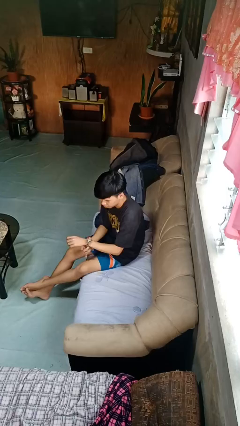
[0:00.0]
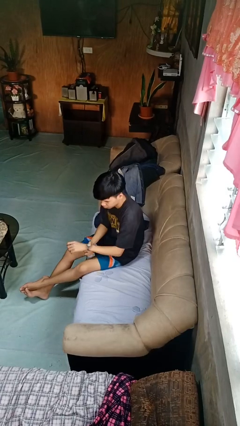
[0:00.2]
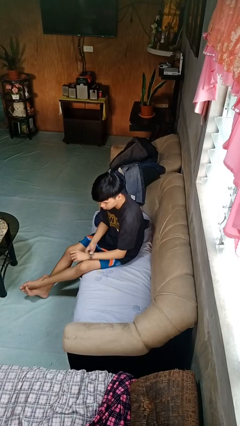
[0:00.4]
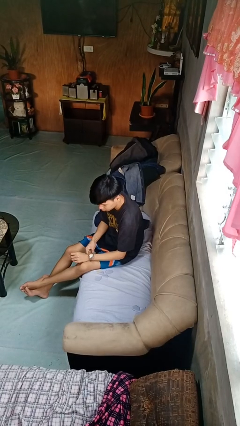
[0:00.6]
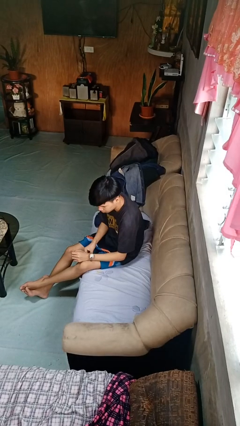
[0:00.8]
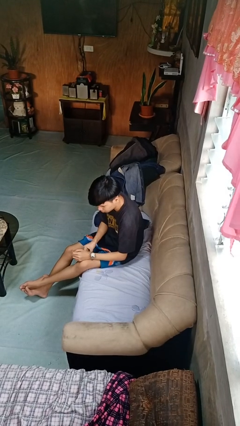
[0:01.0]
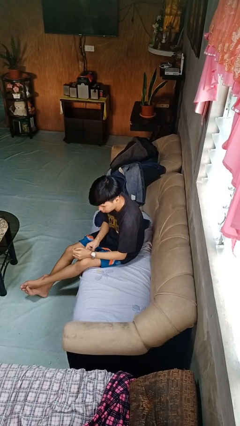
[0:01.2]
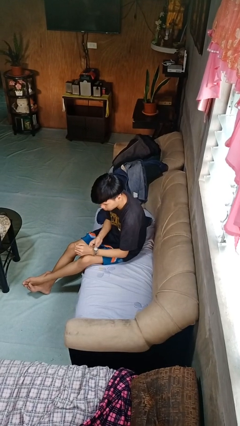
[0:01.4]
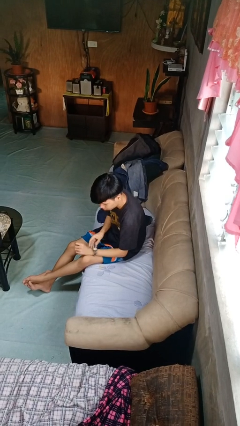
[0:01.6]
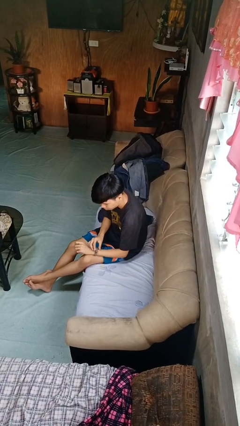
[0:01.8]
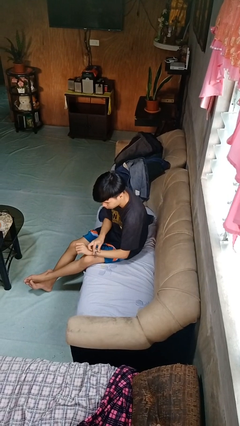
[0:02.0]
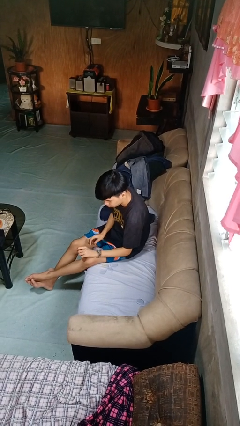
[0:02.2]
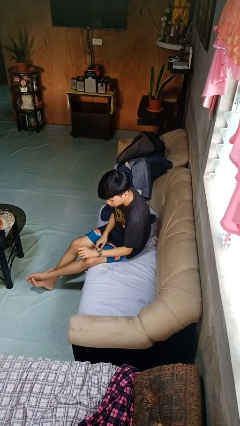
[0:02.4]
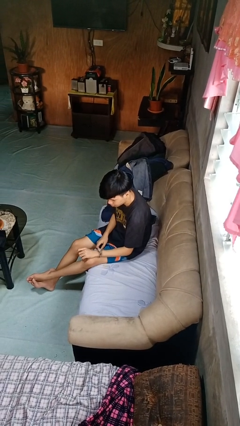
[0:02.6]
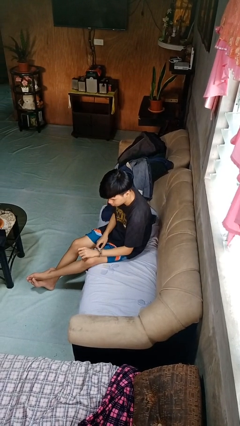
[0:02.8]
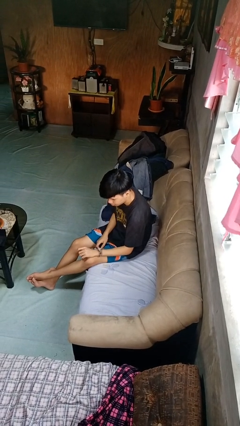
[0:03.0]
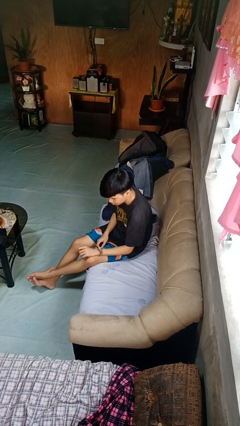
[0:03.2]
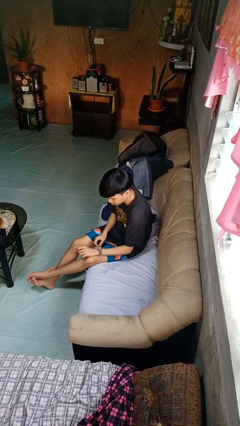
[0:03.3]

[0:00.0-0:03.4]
person puts on wristwatch

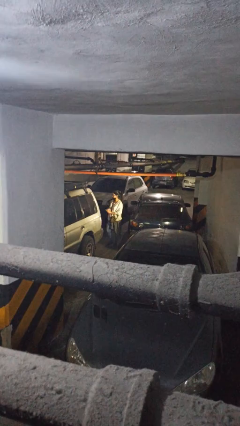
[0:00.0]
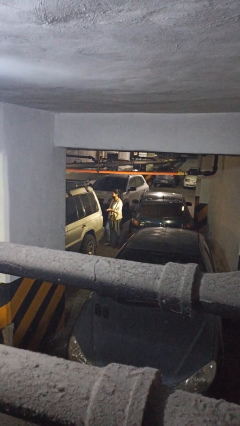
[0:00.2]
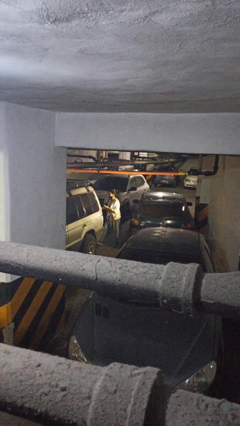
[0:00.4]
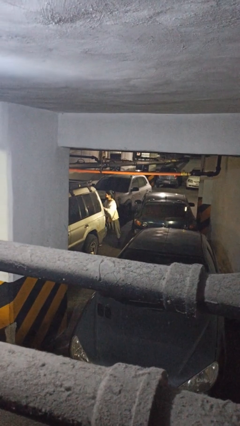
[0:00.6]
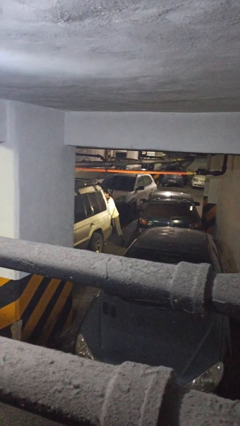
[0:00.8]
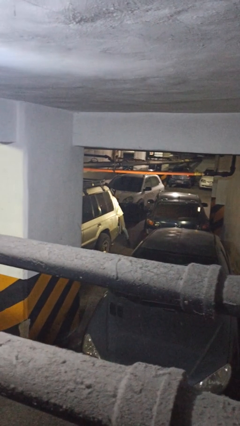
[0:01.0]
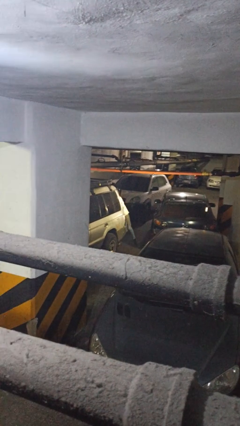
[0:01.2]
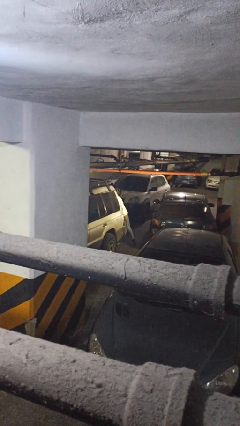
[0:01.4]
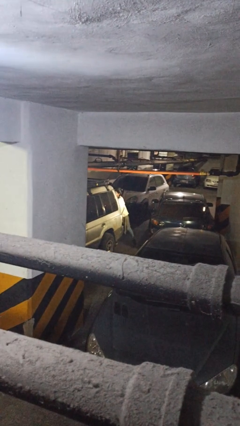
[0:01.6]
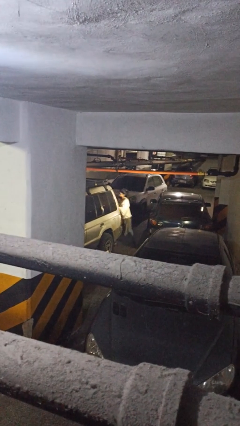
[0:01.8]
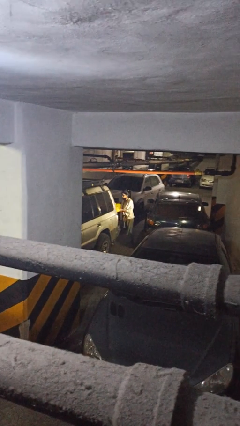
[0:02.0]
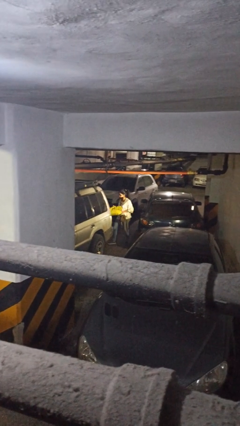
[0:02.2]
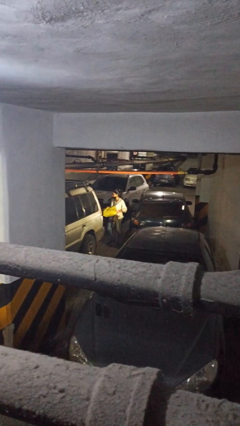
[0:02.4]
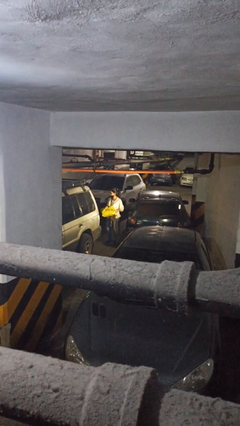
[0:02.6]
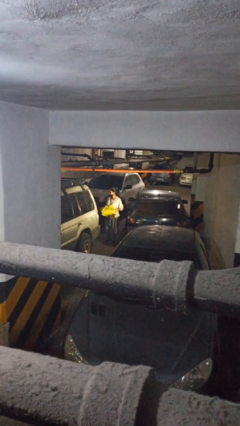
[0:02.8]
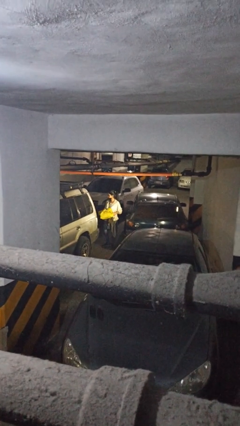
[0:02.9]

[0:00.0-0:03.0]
person unloads car

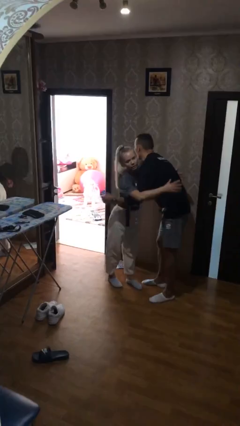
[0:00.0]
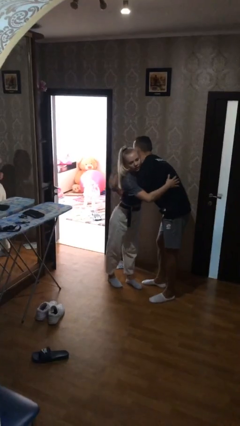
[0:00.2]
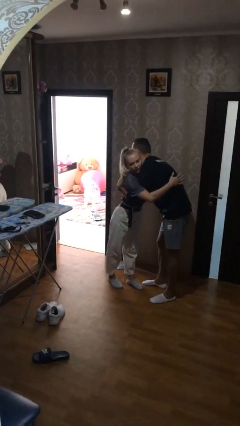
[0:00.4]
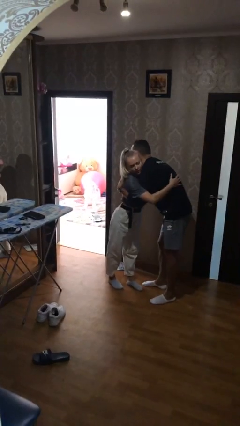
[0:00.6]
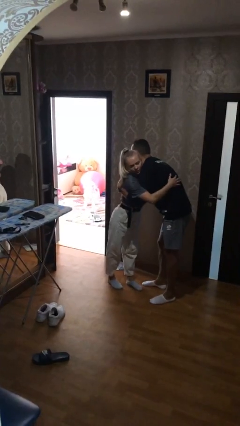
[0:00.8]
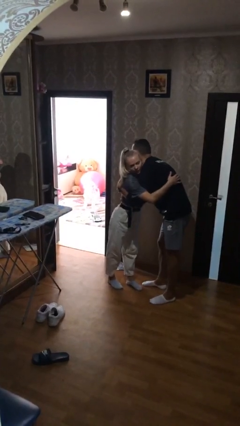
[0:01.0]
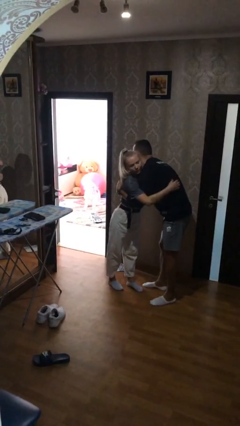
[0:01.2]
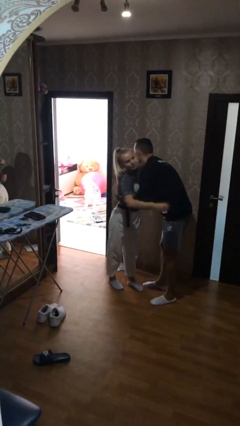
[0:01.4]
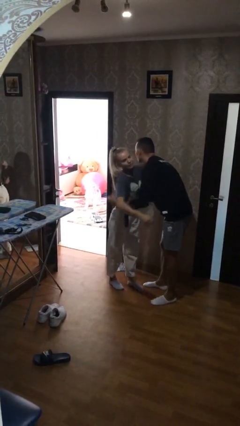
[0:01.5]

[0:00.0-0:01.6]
person embraces person

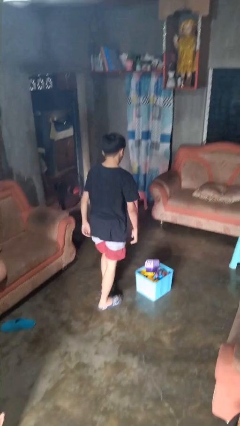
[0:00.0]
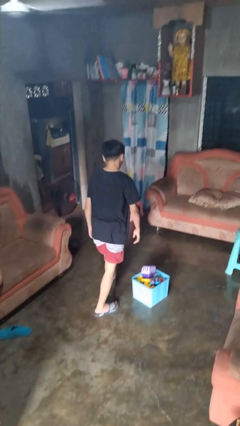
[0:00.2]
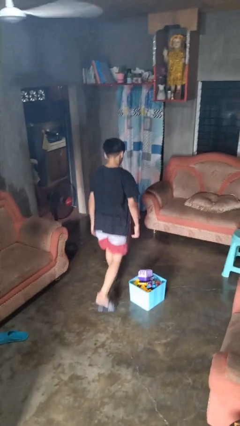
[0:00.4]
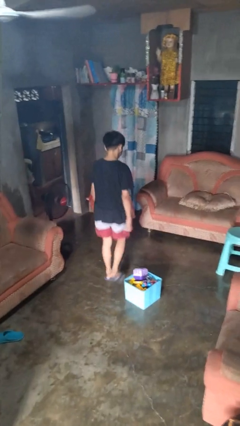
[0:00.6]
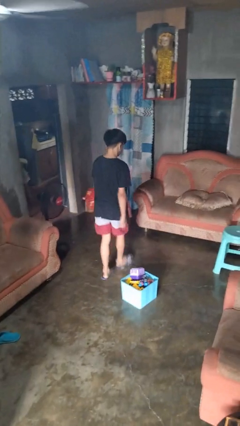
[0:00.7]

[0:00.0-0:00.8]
person stands up from floor

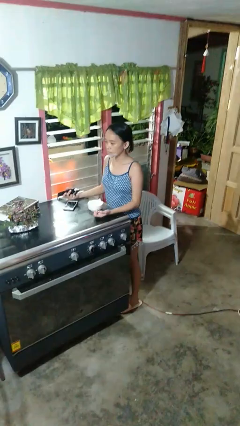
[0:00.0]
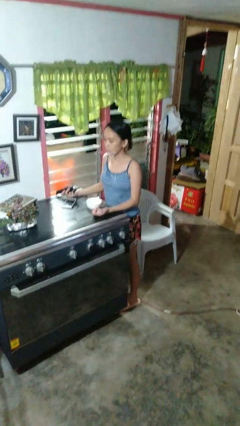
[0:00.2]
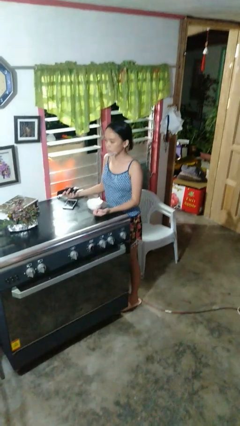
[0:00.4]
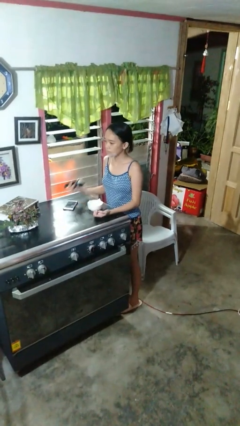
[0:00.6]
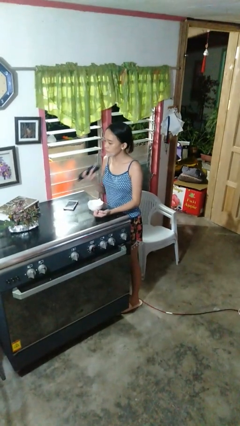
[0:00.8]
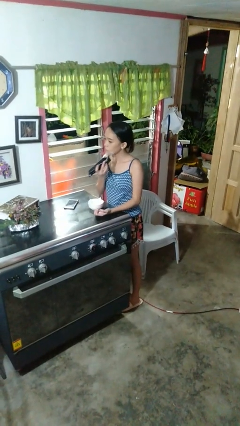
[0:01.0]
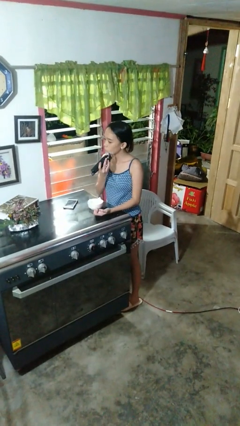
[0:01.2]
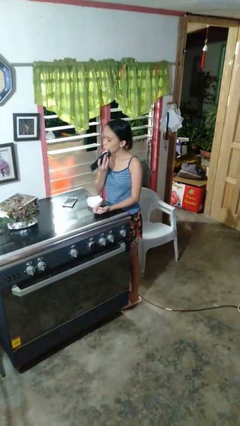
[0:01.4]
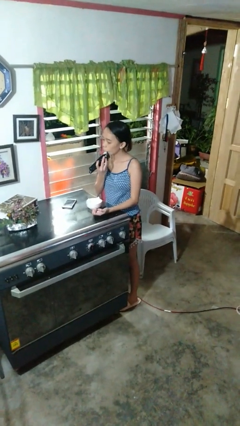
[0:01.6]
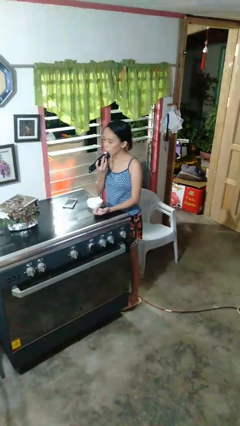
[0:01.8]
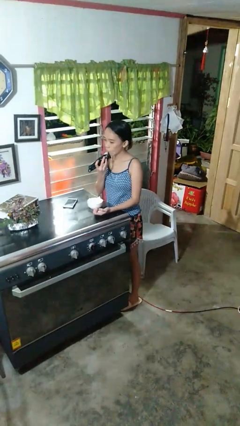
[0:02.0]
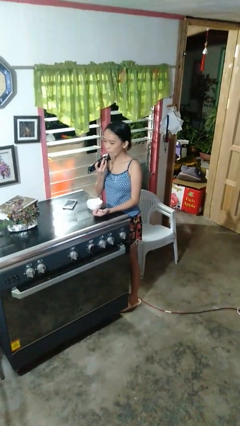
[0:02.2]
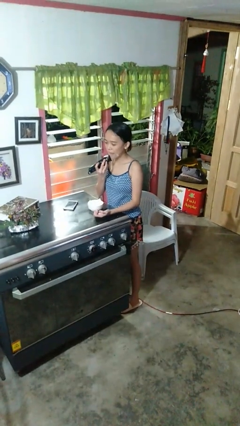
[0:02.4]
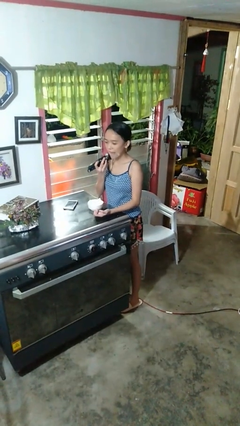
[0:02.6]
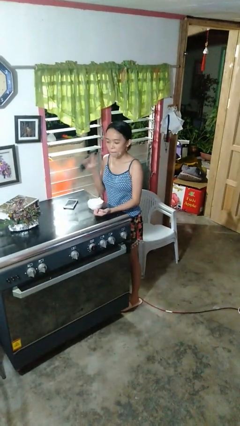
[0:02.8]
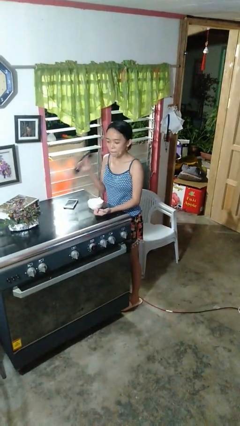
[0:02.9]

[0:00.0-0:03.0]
person shaves face

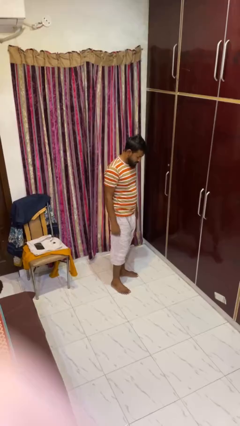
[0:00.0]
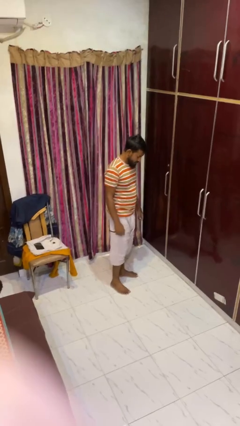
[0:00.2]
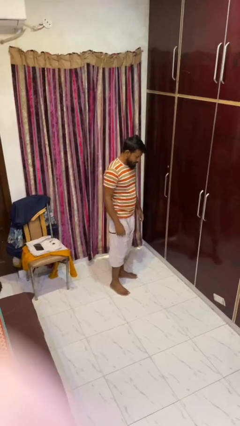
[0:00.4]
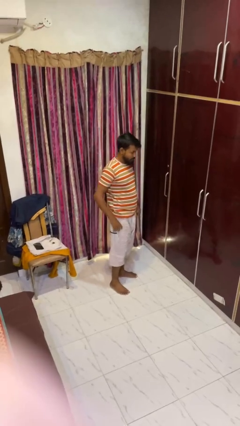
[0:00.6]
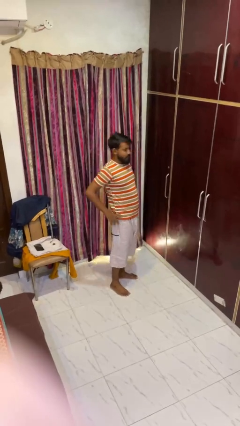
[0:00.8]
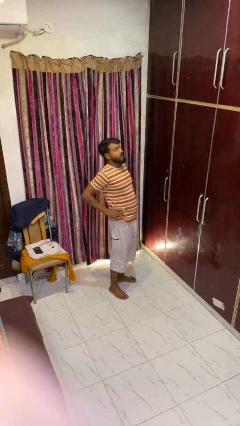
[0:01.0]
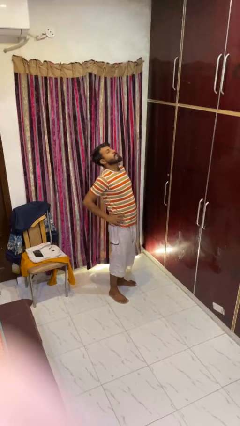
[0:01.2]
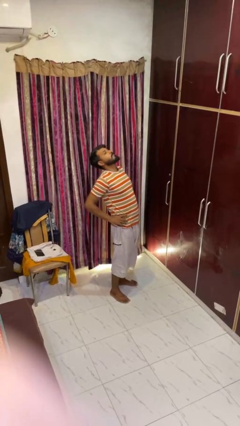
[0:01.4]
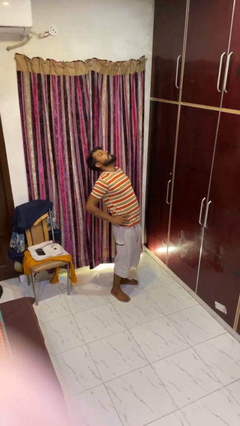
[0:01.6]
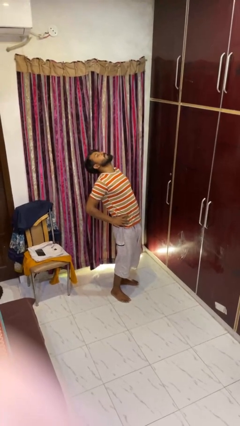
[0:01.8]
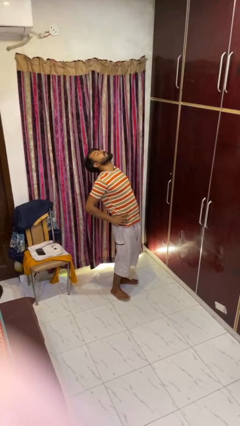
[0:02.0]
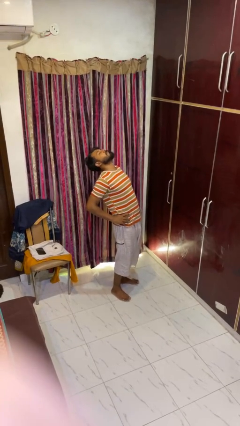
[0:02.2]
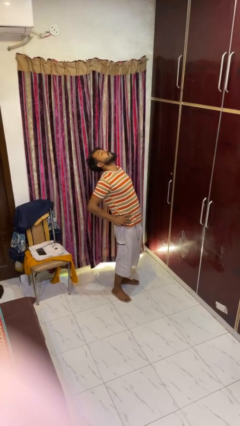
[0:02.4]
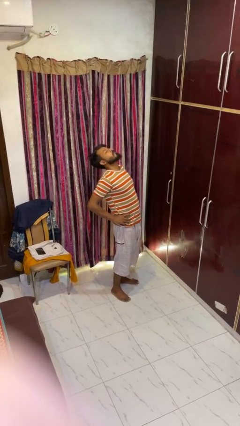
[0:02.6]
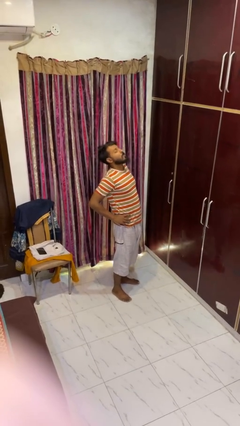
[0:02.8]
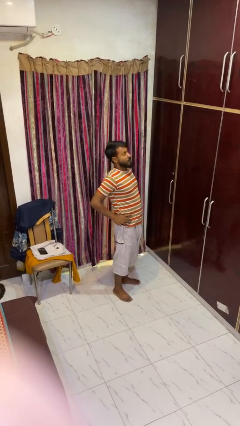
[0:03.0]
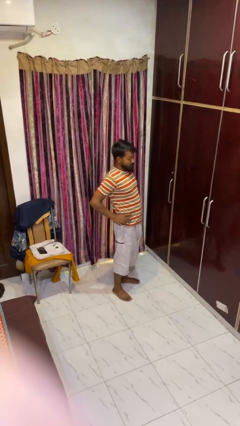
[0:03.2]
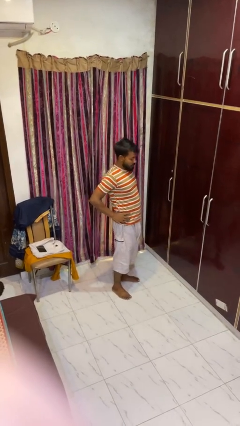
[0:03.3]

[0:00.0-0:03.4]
person stretches back

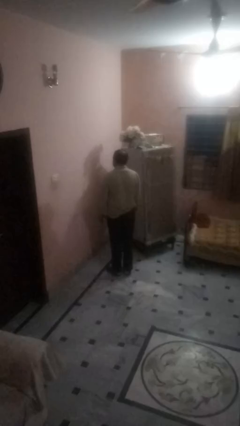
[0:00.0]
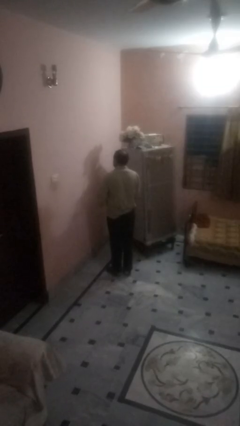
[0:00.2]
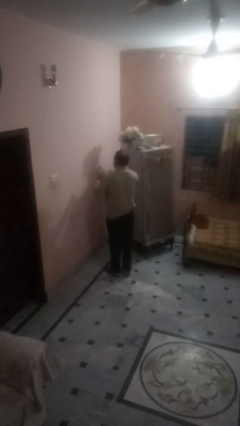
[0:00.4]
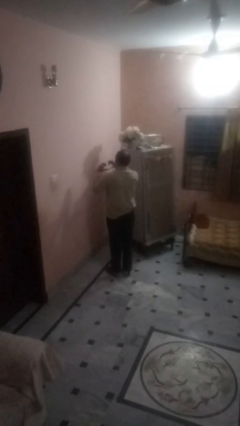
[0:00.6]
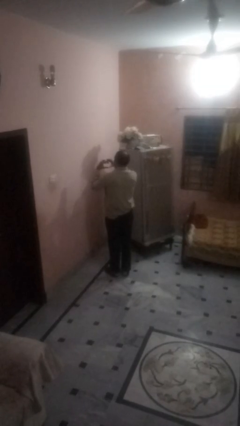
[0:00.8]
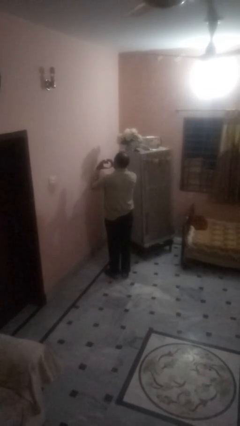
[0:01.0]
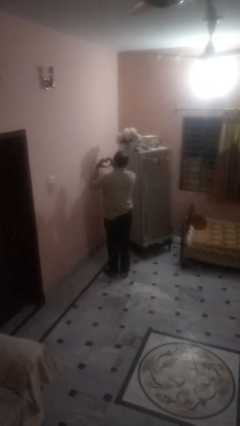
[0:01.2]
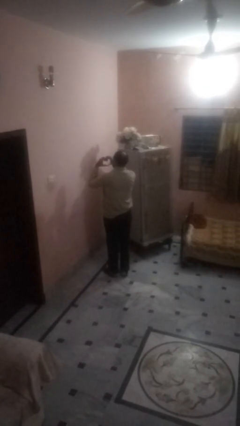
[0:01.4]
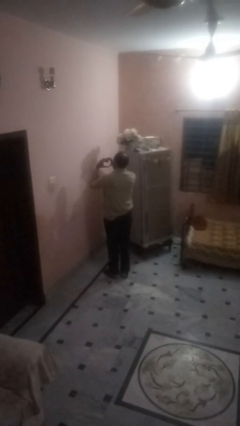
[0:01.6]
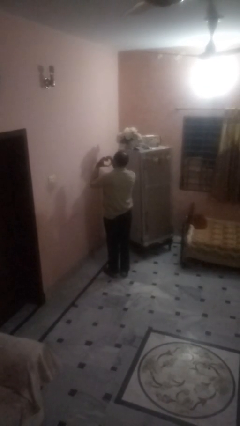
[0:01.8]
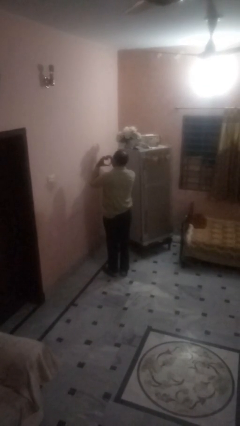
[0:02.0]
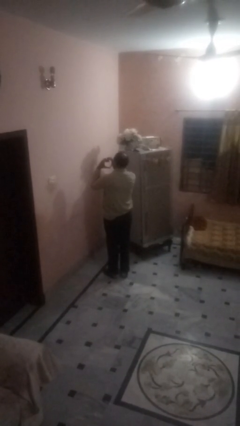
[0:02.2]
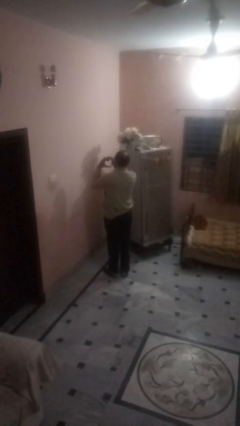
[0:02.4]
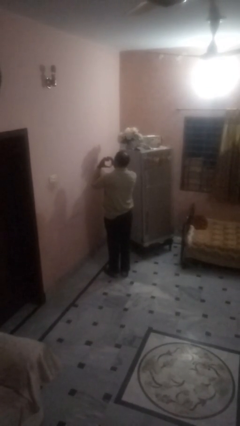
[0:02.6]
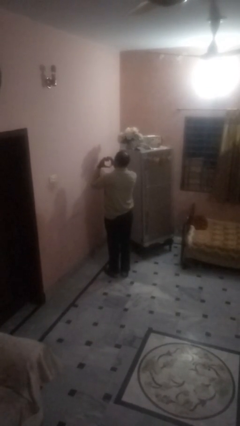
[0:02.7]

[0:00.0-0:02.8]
person gestures heart
